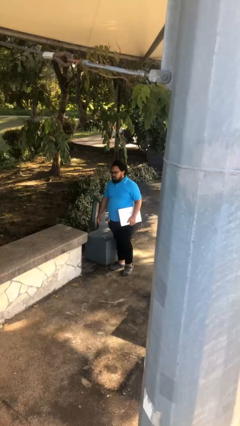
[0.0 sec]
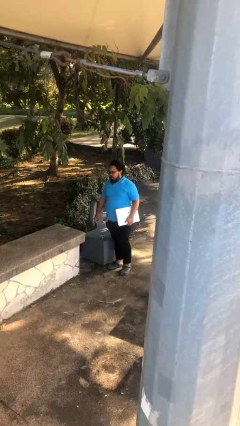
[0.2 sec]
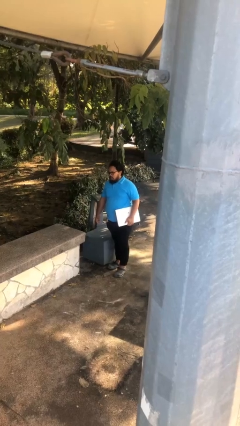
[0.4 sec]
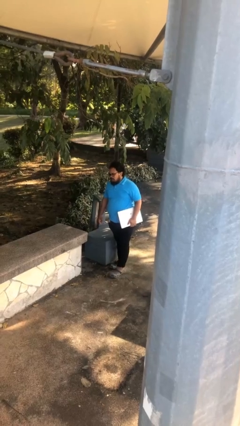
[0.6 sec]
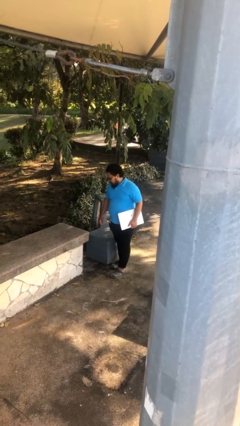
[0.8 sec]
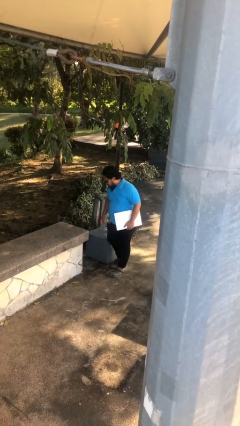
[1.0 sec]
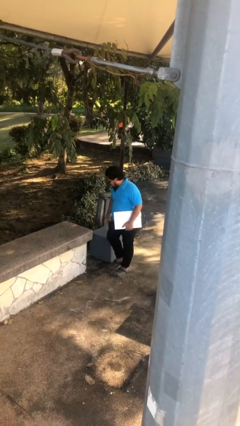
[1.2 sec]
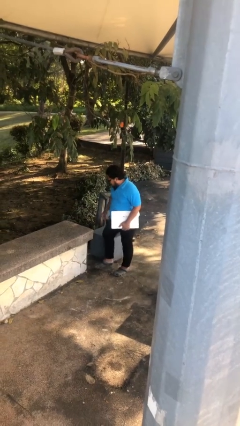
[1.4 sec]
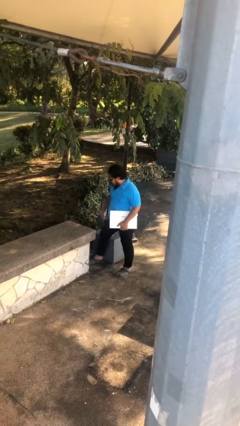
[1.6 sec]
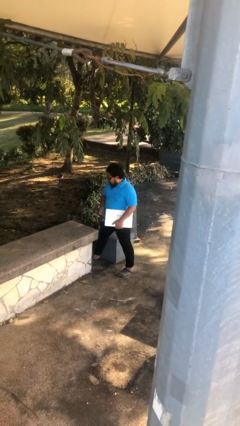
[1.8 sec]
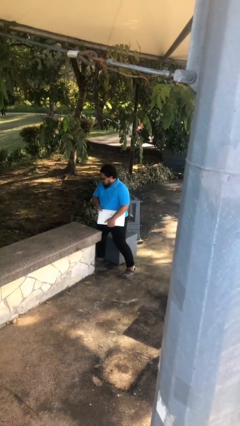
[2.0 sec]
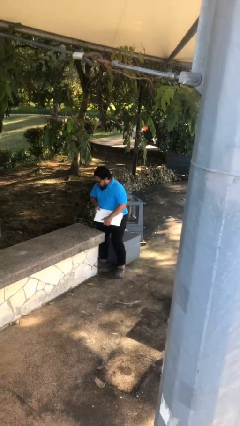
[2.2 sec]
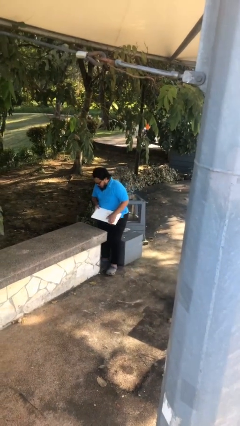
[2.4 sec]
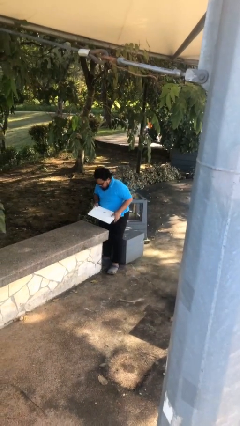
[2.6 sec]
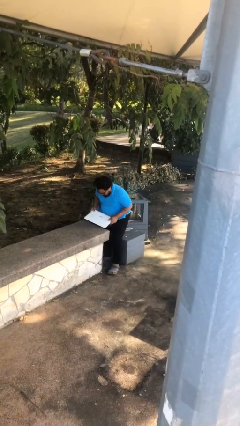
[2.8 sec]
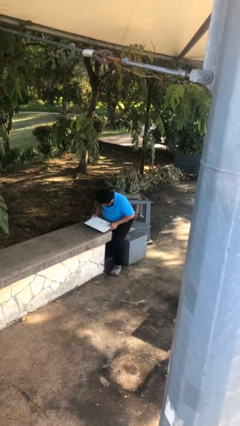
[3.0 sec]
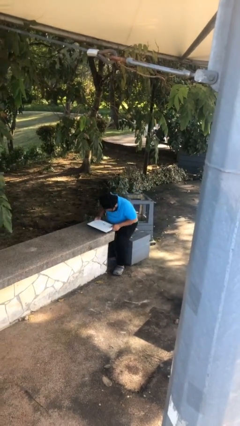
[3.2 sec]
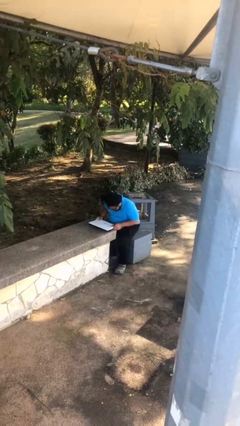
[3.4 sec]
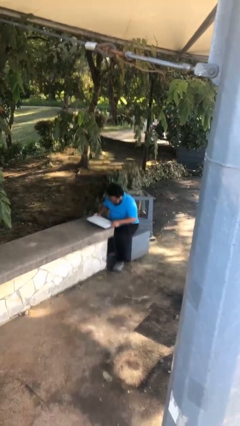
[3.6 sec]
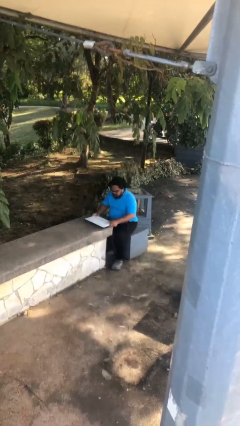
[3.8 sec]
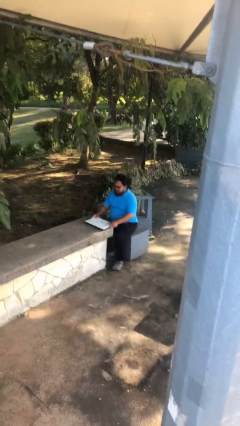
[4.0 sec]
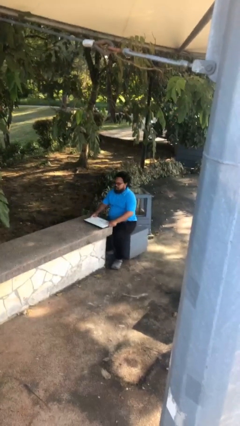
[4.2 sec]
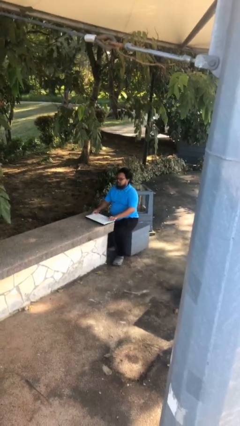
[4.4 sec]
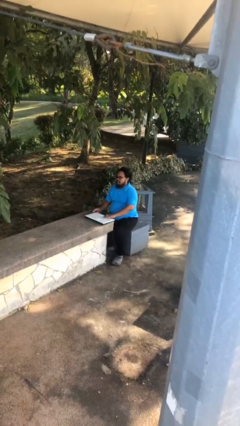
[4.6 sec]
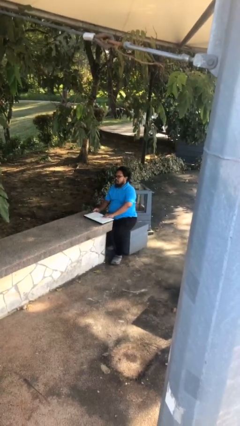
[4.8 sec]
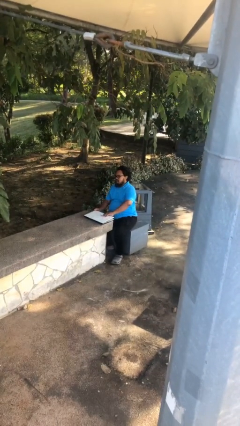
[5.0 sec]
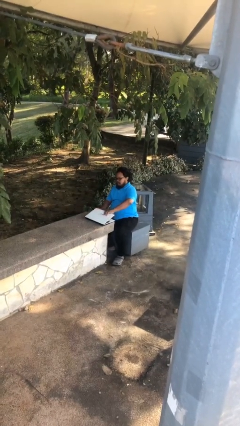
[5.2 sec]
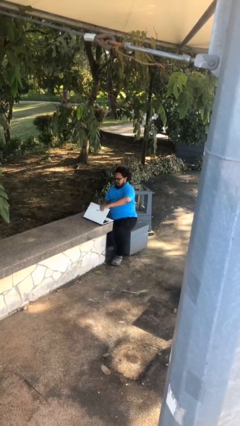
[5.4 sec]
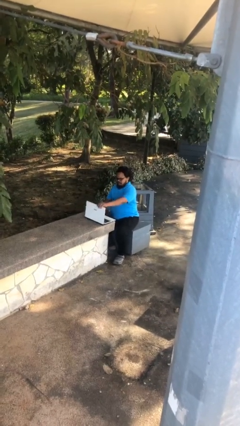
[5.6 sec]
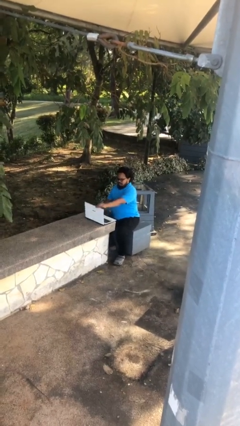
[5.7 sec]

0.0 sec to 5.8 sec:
person sits down

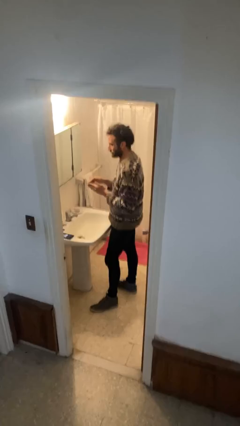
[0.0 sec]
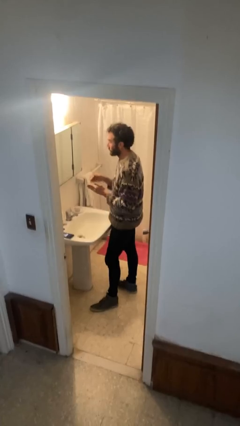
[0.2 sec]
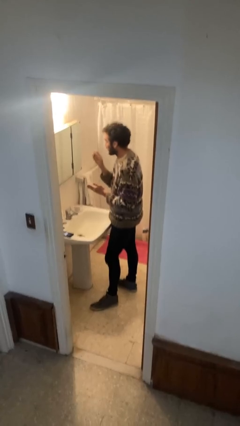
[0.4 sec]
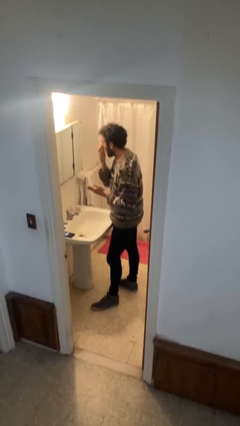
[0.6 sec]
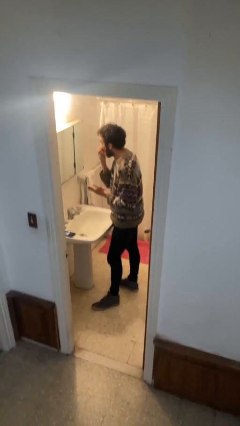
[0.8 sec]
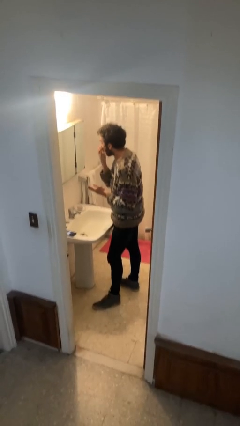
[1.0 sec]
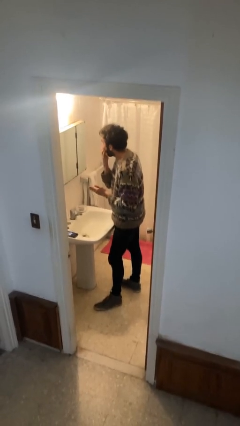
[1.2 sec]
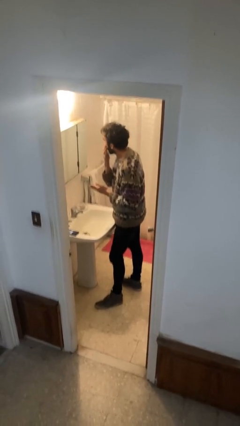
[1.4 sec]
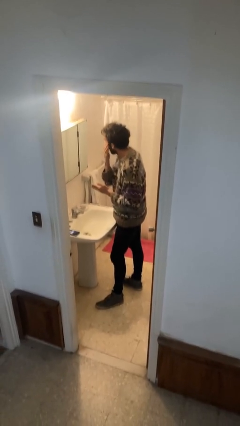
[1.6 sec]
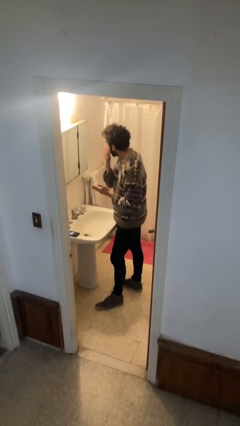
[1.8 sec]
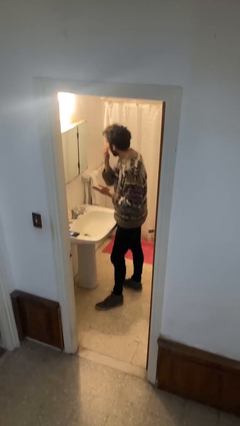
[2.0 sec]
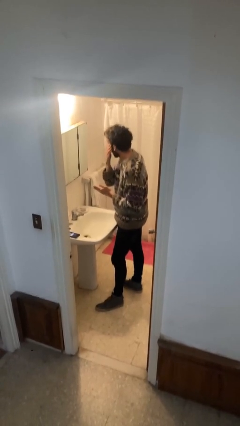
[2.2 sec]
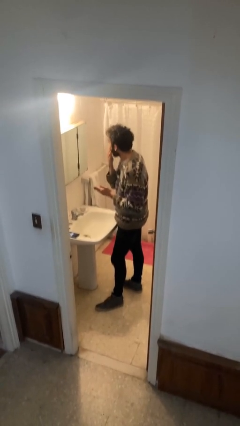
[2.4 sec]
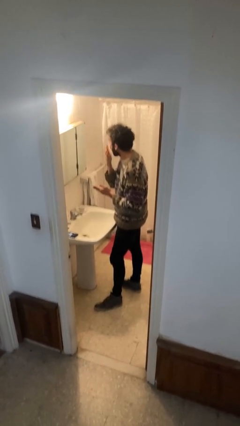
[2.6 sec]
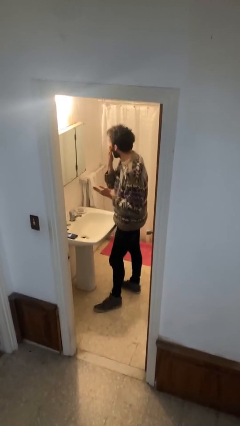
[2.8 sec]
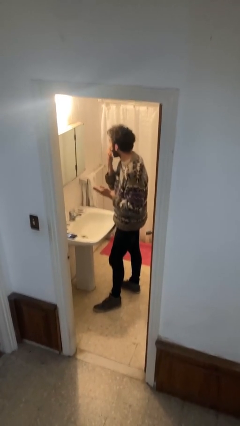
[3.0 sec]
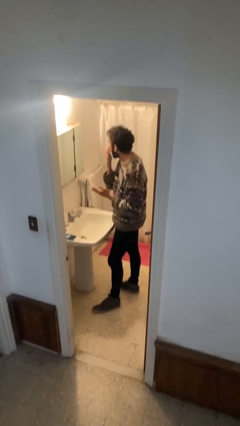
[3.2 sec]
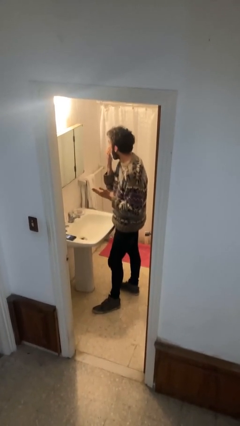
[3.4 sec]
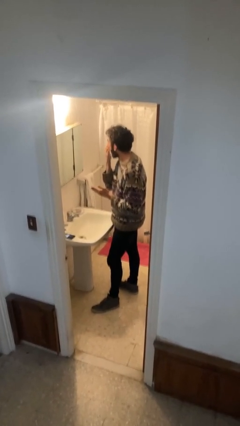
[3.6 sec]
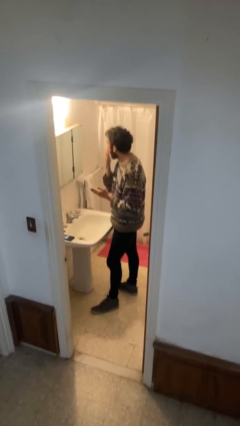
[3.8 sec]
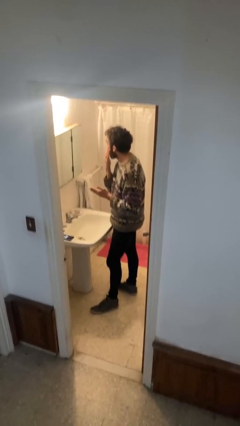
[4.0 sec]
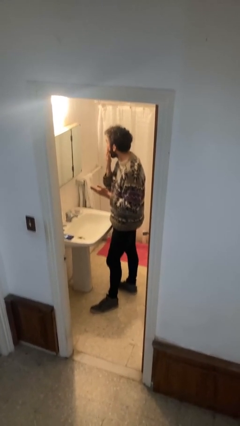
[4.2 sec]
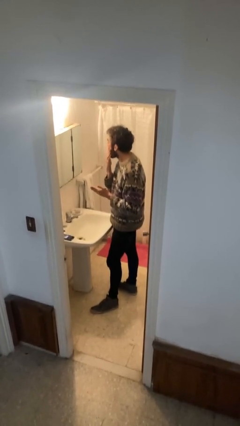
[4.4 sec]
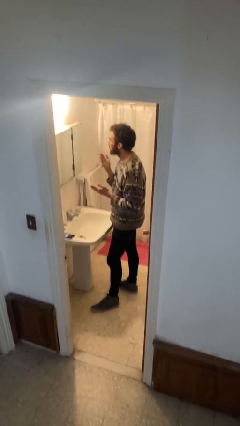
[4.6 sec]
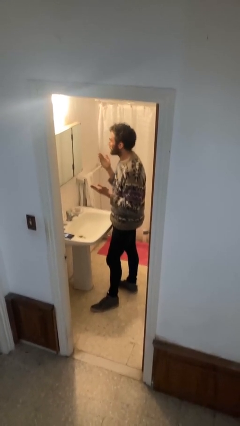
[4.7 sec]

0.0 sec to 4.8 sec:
person applies foundation makeup

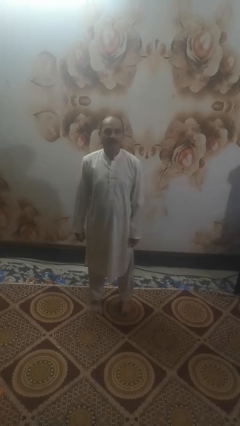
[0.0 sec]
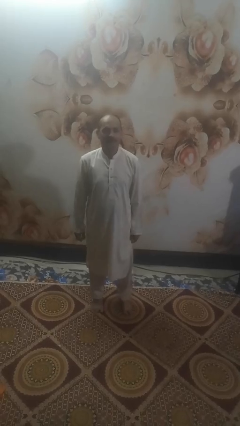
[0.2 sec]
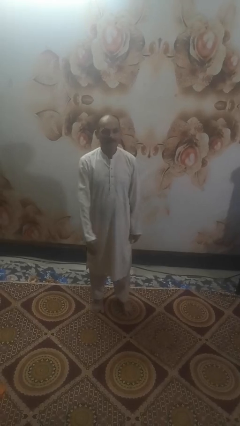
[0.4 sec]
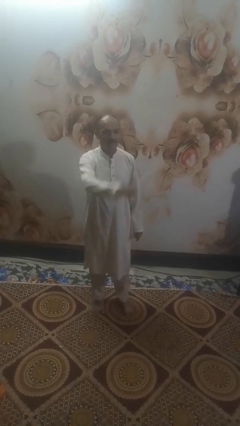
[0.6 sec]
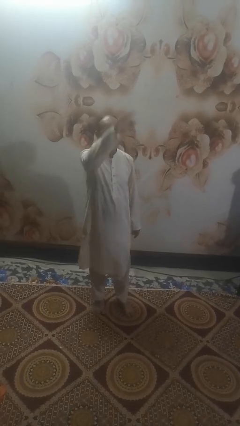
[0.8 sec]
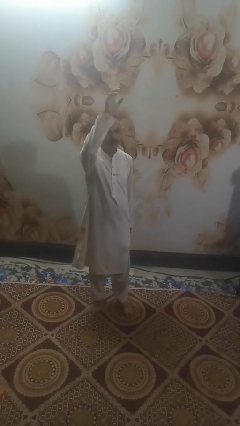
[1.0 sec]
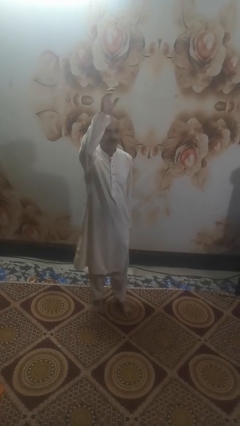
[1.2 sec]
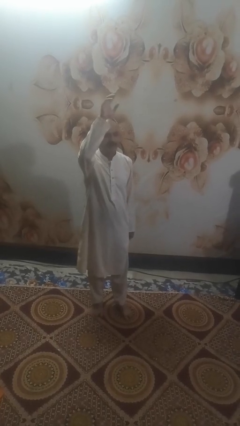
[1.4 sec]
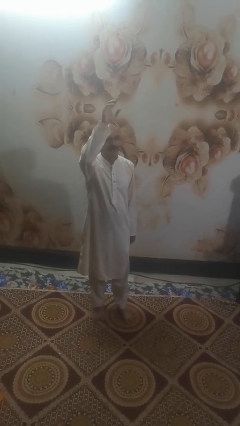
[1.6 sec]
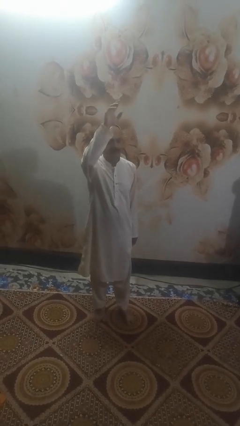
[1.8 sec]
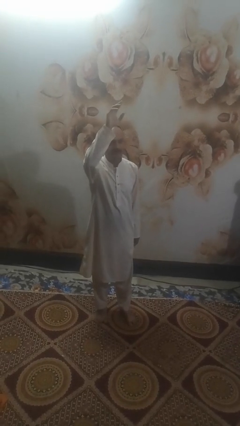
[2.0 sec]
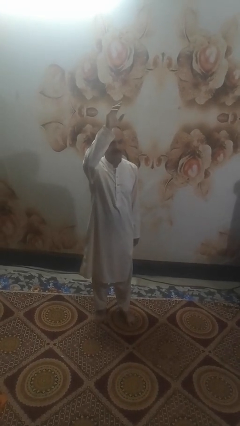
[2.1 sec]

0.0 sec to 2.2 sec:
person gestures swipe up

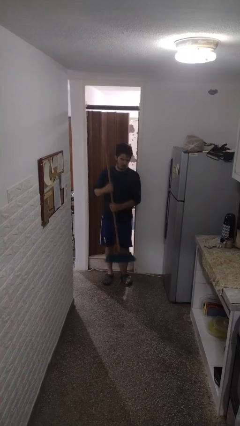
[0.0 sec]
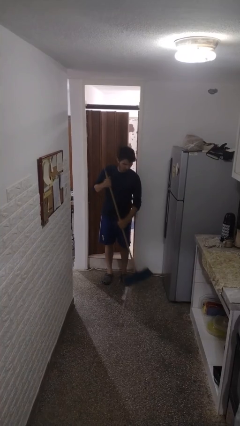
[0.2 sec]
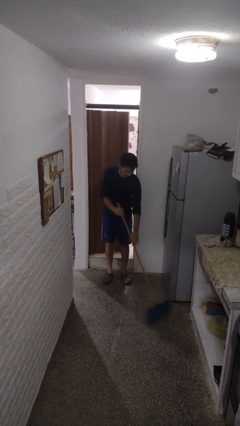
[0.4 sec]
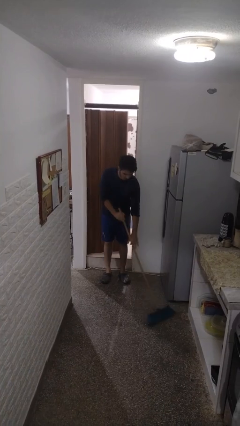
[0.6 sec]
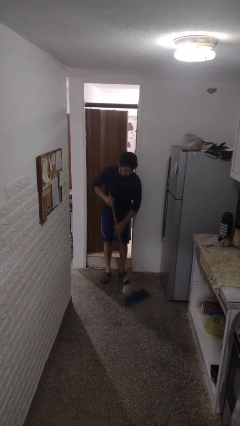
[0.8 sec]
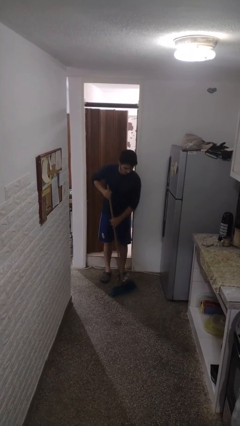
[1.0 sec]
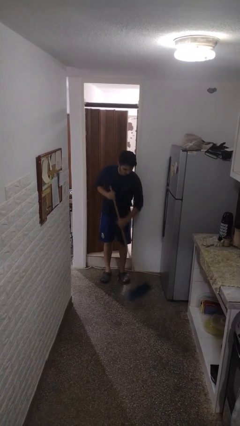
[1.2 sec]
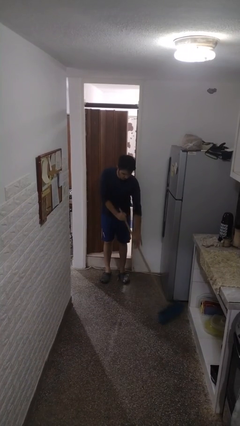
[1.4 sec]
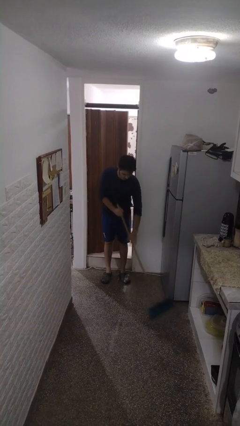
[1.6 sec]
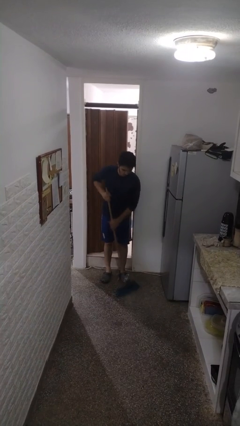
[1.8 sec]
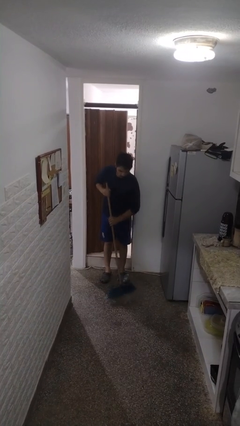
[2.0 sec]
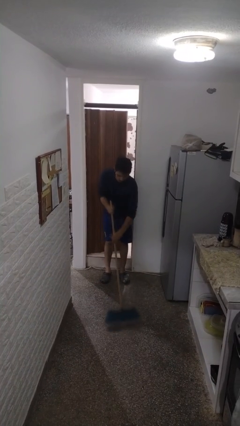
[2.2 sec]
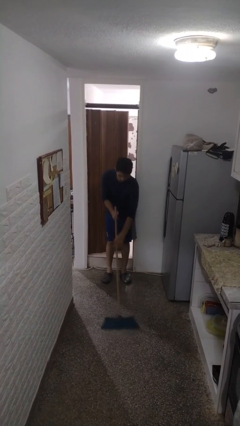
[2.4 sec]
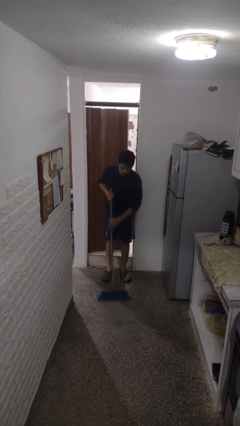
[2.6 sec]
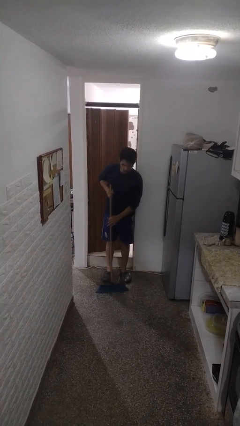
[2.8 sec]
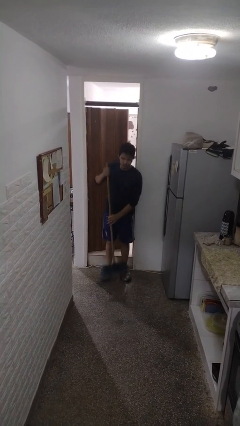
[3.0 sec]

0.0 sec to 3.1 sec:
person sweeps floor

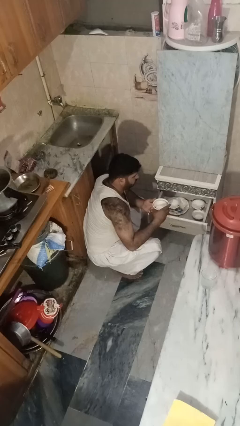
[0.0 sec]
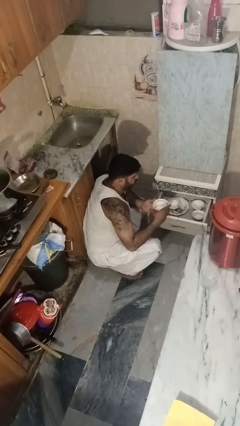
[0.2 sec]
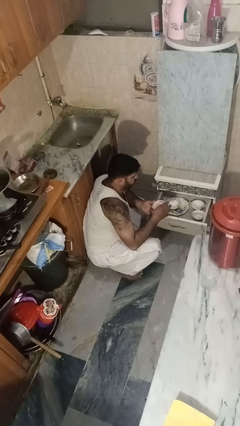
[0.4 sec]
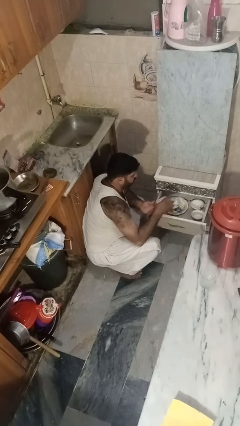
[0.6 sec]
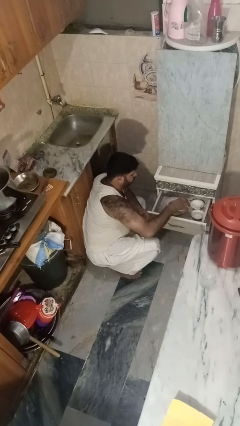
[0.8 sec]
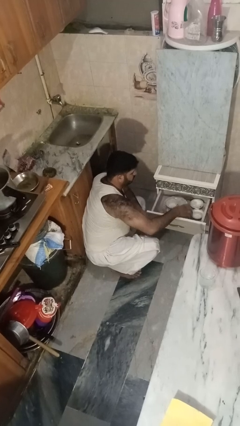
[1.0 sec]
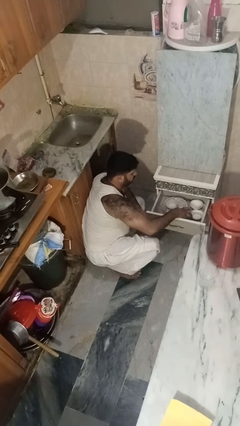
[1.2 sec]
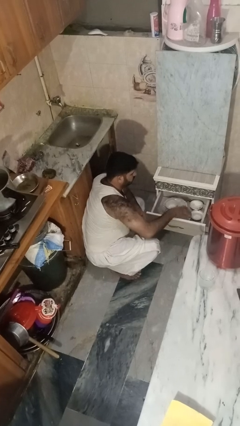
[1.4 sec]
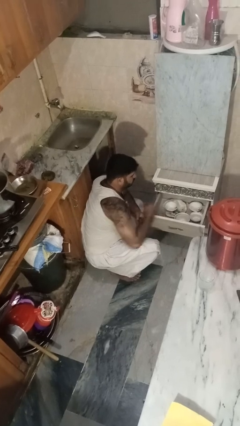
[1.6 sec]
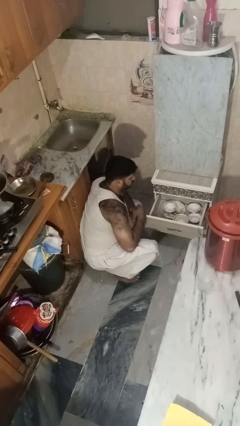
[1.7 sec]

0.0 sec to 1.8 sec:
person puts object into kitchen drawer
